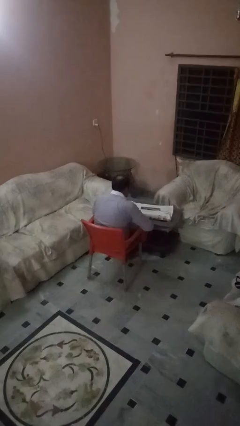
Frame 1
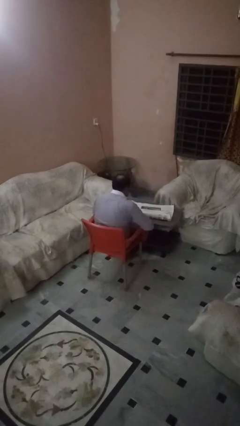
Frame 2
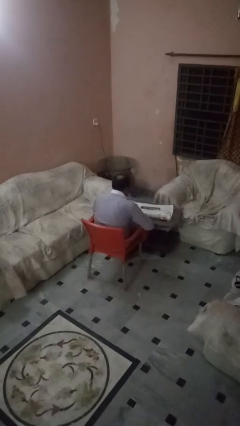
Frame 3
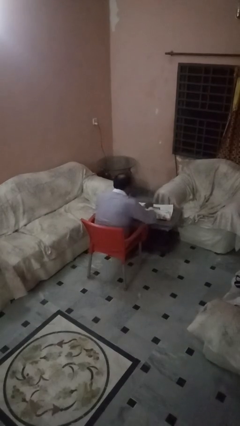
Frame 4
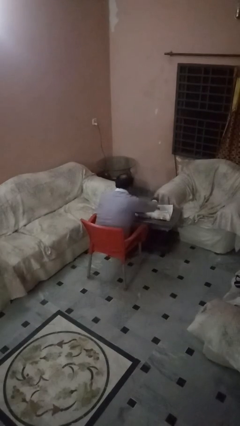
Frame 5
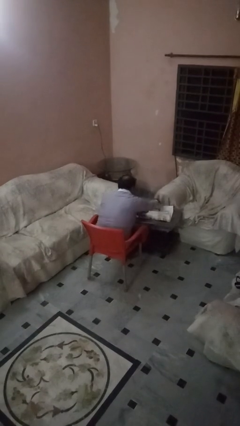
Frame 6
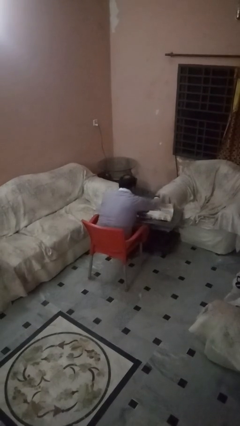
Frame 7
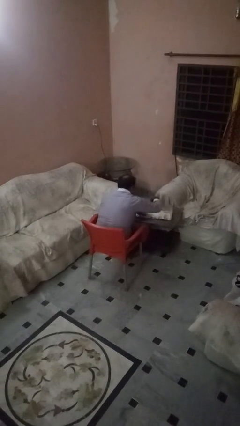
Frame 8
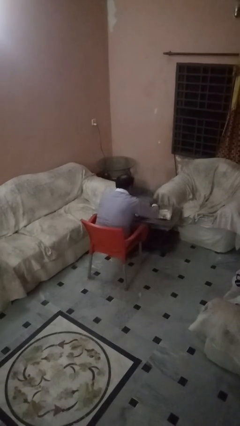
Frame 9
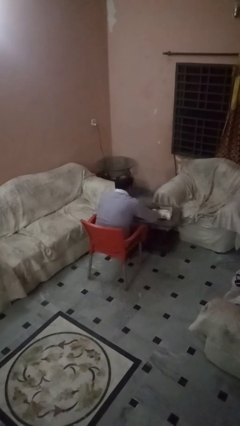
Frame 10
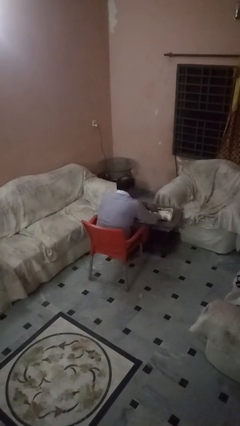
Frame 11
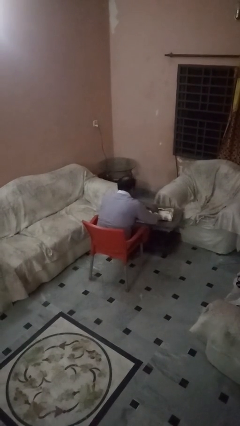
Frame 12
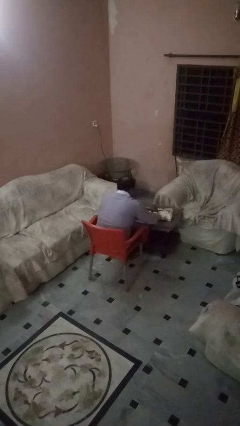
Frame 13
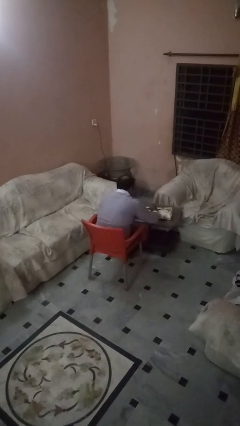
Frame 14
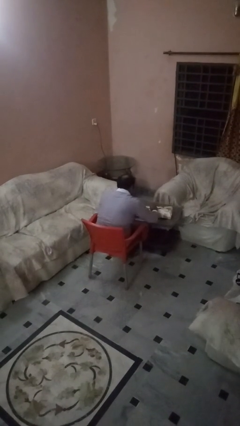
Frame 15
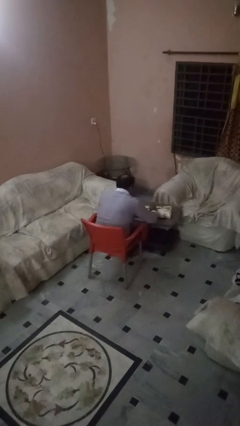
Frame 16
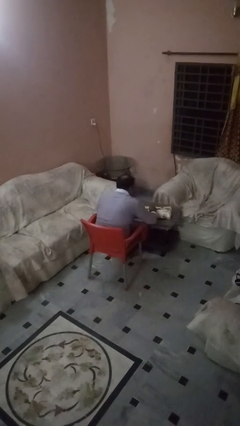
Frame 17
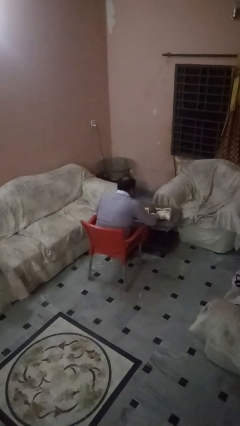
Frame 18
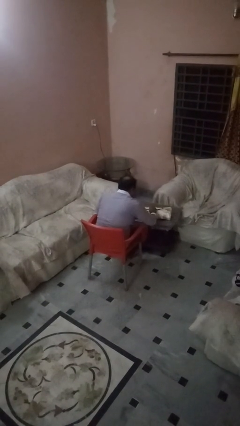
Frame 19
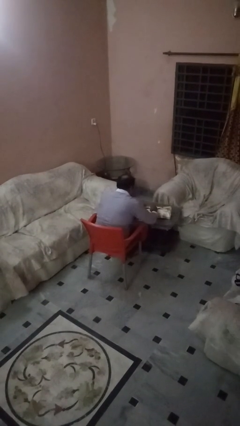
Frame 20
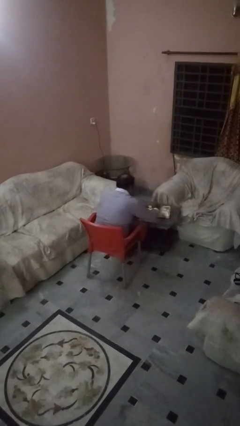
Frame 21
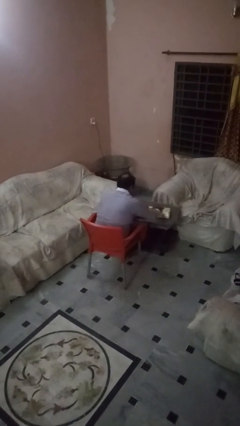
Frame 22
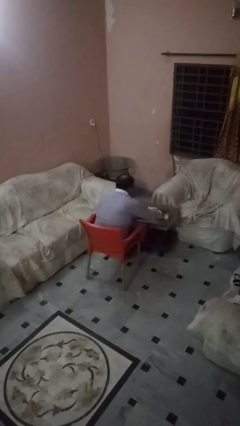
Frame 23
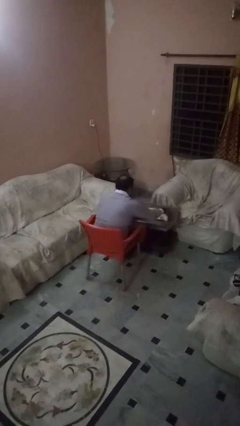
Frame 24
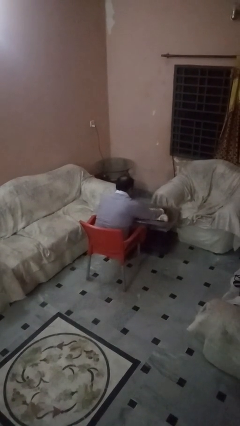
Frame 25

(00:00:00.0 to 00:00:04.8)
person wraps box

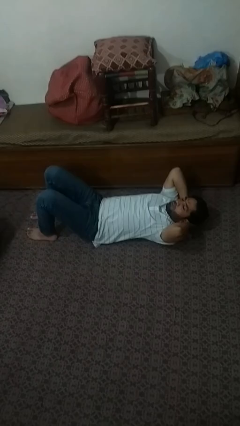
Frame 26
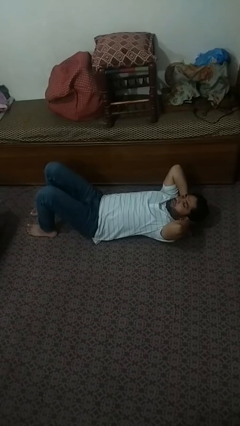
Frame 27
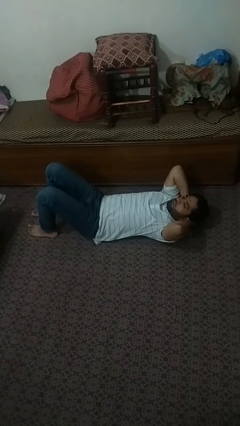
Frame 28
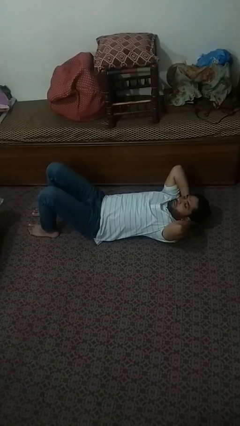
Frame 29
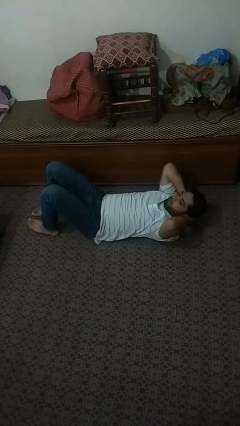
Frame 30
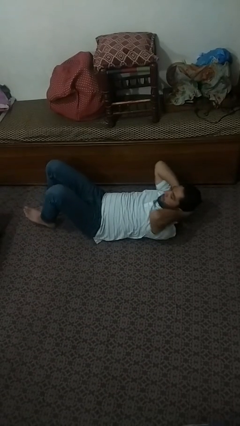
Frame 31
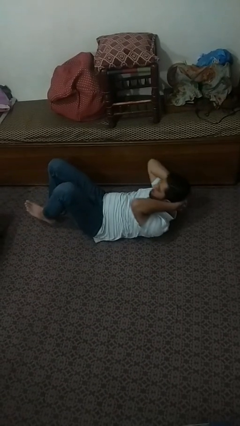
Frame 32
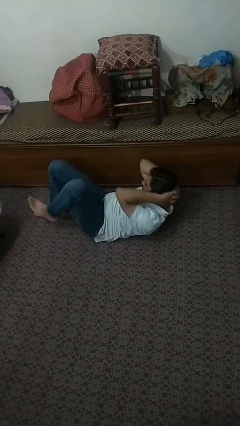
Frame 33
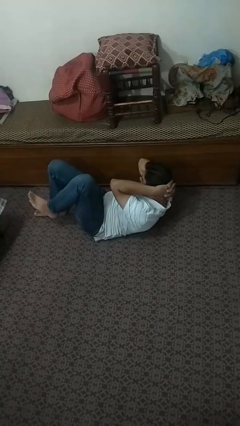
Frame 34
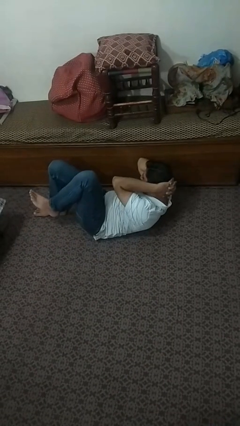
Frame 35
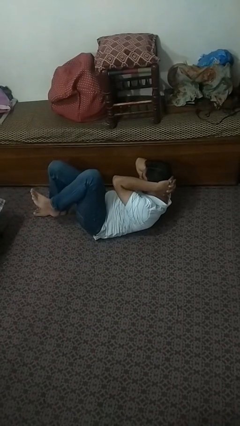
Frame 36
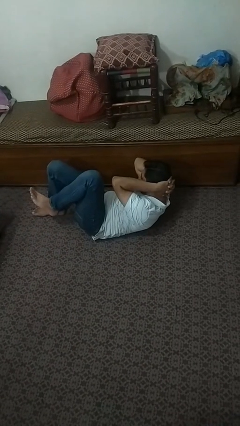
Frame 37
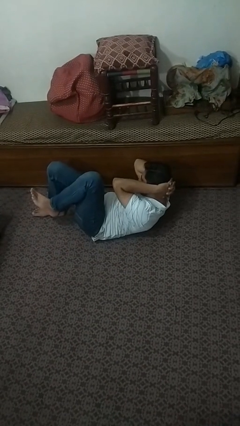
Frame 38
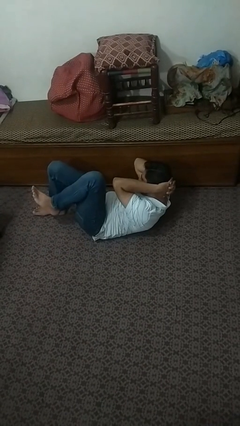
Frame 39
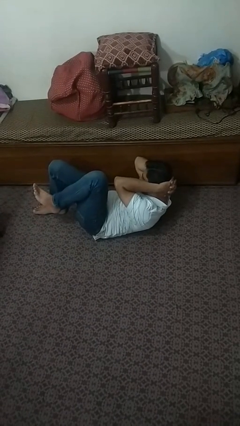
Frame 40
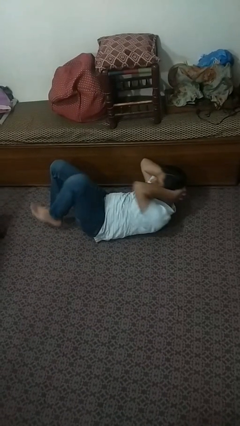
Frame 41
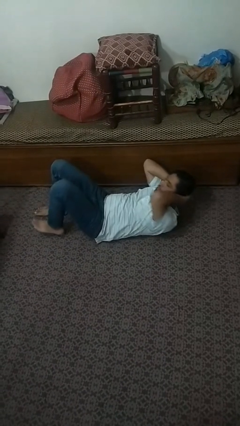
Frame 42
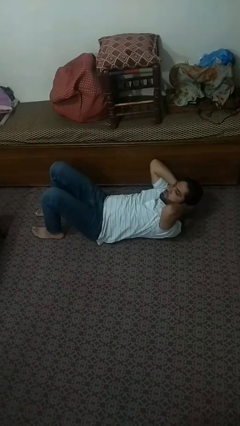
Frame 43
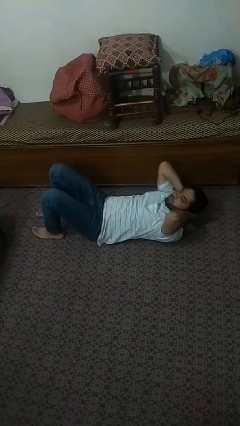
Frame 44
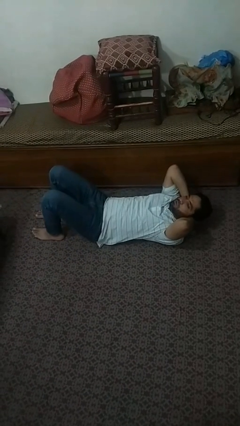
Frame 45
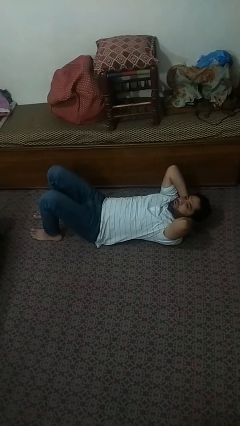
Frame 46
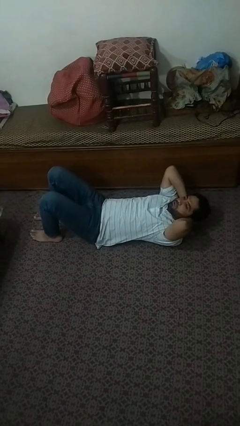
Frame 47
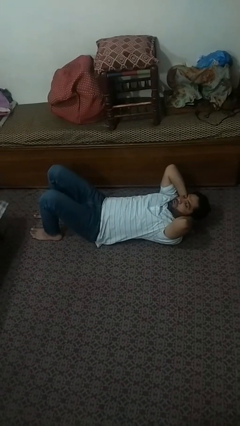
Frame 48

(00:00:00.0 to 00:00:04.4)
person exercises with situp

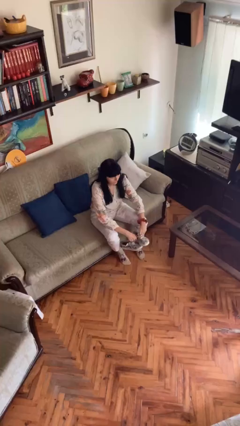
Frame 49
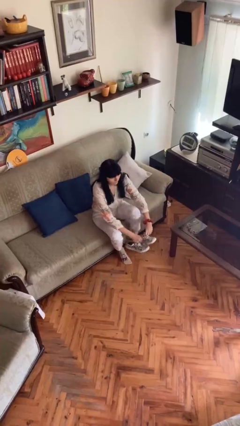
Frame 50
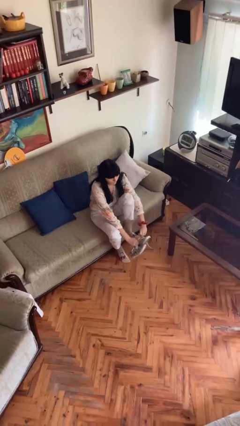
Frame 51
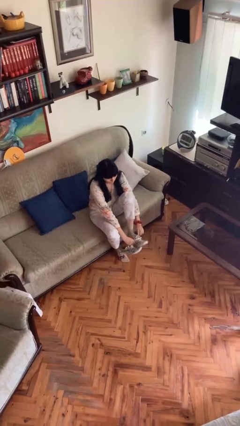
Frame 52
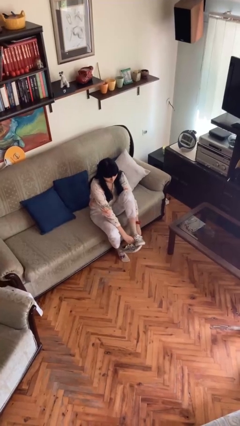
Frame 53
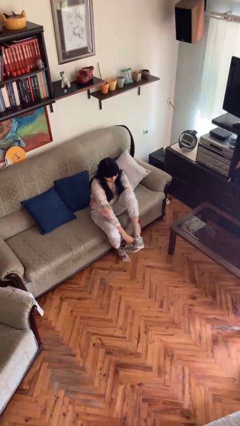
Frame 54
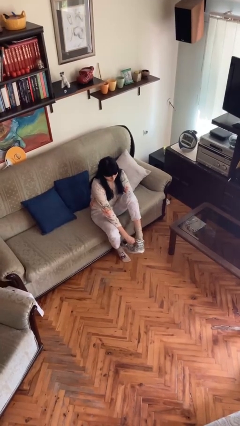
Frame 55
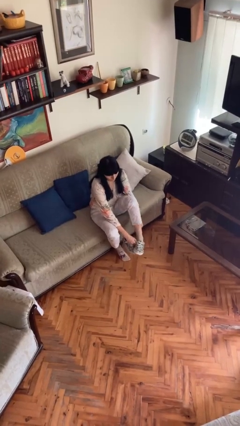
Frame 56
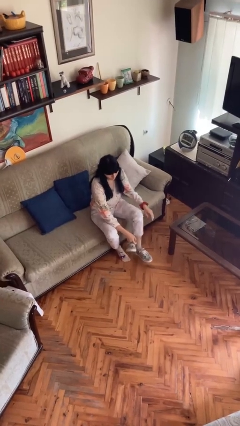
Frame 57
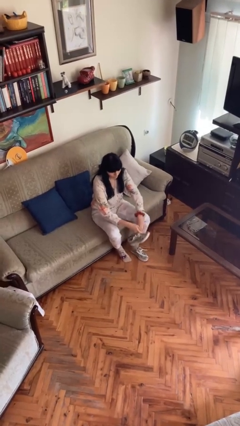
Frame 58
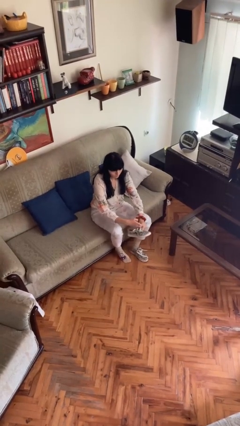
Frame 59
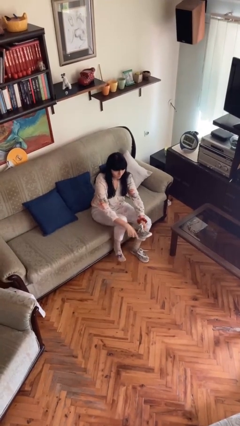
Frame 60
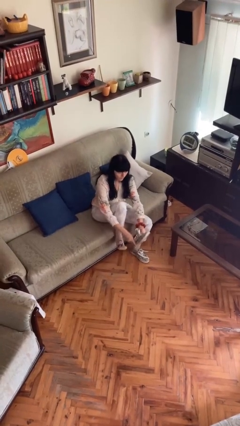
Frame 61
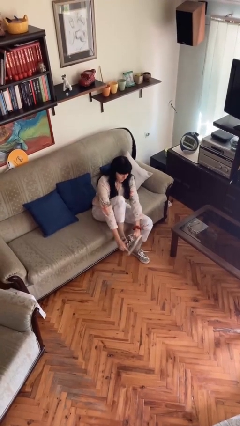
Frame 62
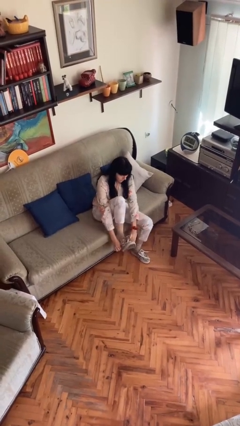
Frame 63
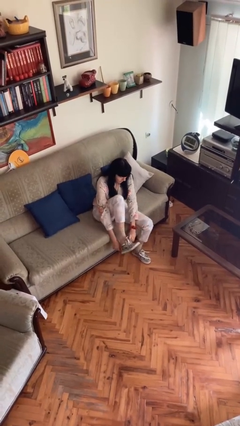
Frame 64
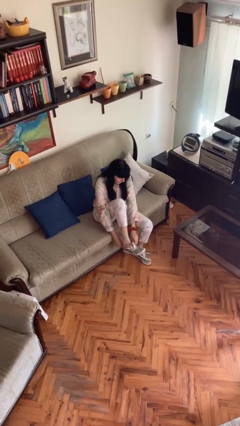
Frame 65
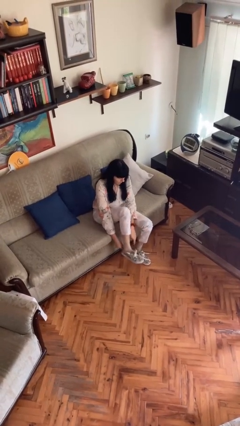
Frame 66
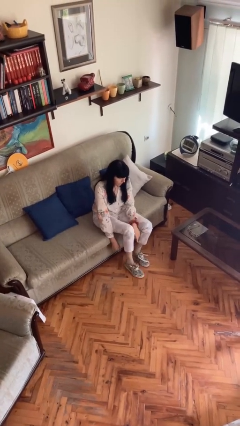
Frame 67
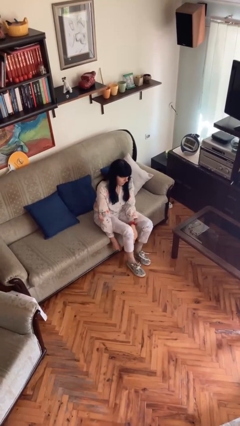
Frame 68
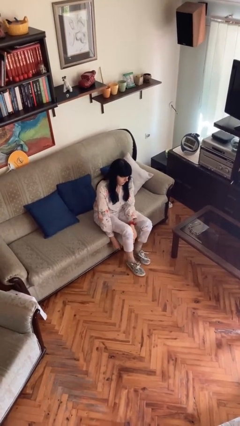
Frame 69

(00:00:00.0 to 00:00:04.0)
person puts on shoes

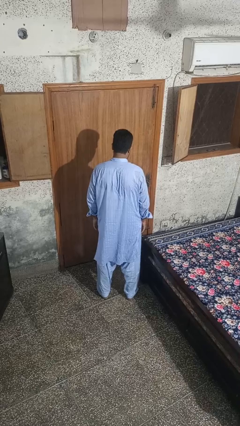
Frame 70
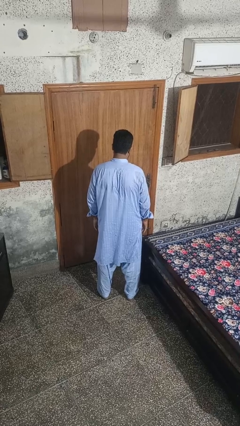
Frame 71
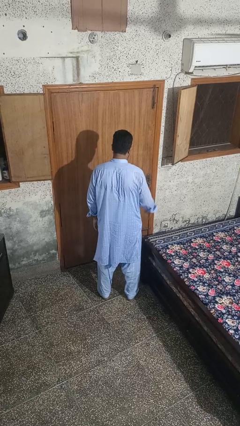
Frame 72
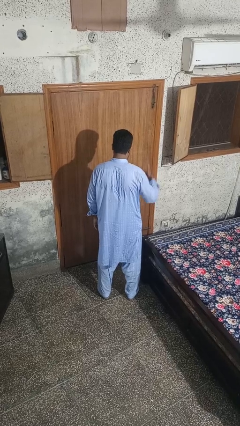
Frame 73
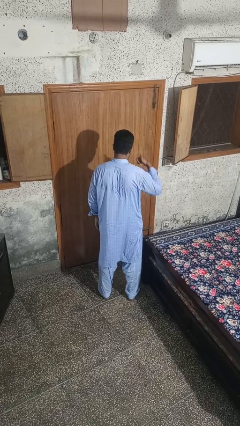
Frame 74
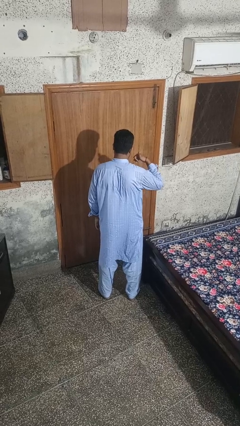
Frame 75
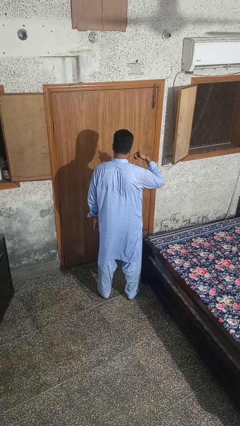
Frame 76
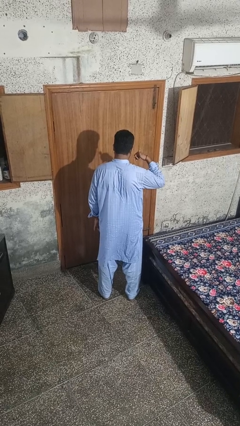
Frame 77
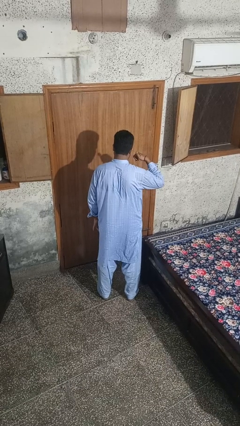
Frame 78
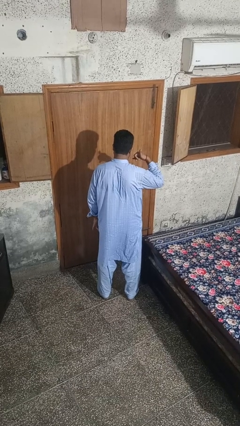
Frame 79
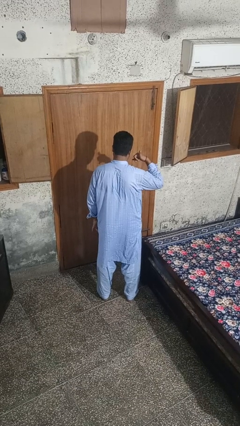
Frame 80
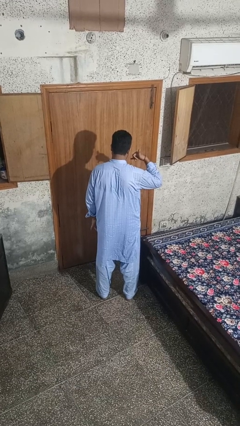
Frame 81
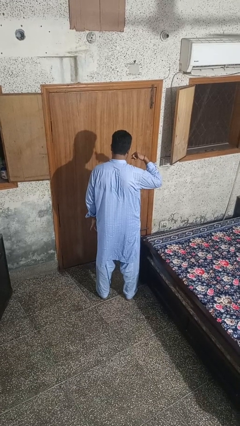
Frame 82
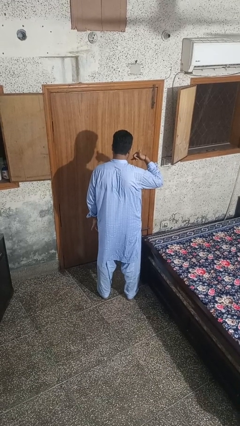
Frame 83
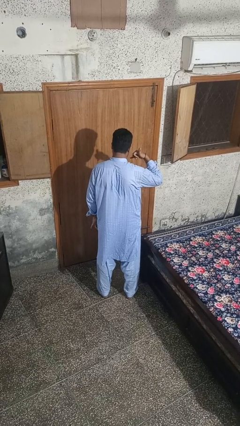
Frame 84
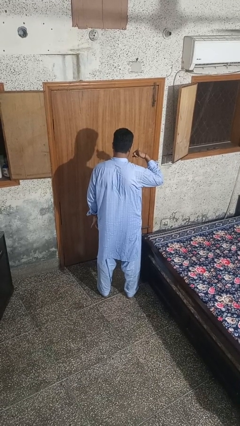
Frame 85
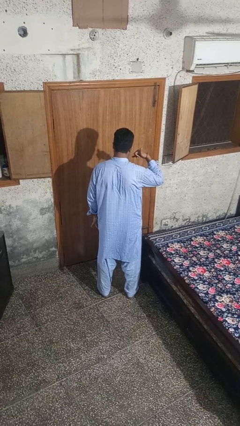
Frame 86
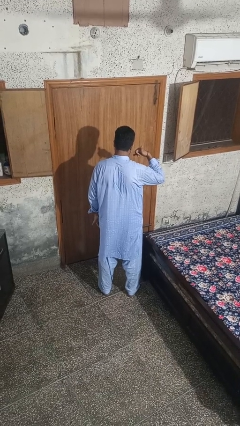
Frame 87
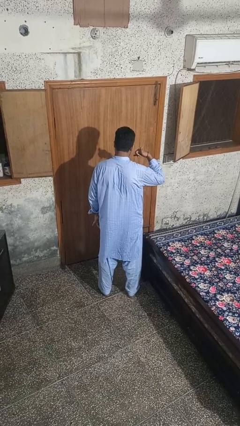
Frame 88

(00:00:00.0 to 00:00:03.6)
person gestures call me

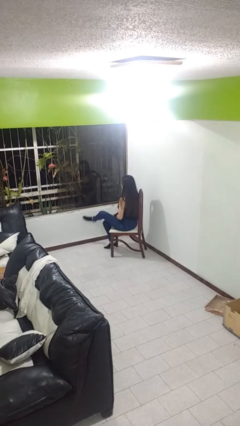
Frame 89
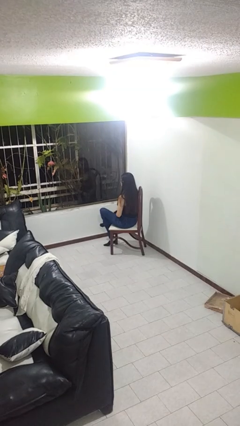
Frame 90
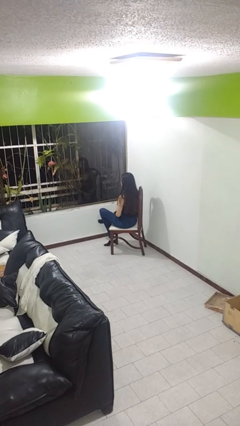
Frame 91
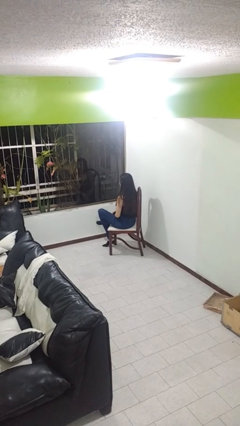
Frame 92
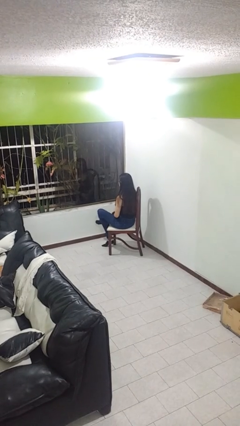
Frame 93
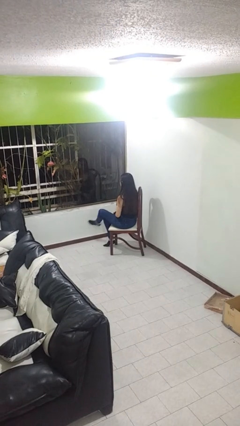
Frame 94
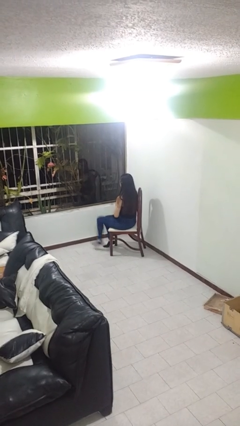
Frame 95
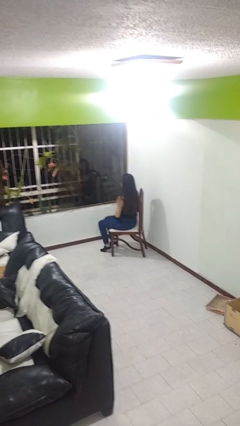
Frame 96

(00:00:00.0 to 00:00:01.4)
person crosses legs
